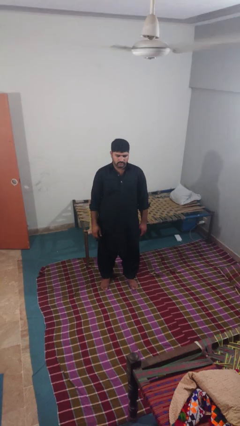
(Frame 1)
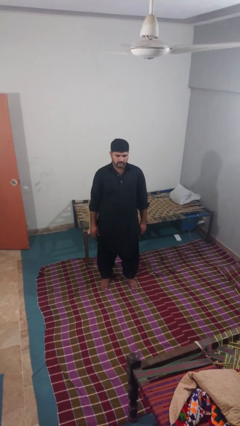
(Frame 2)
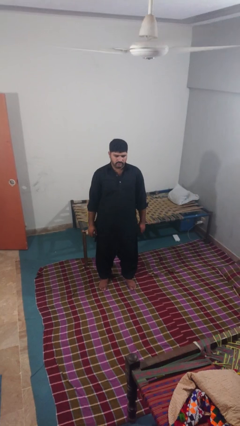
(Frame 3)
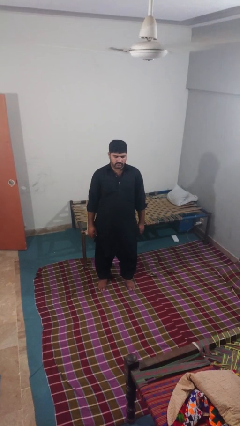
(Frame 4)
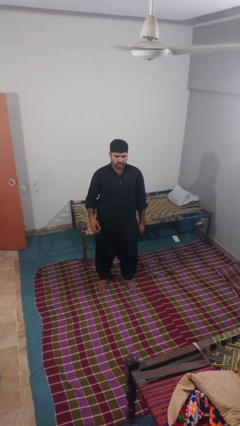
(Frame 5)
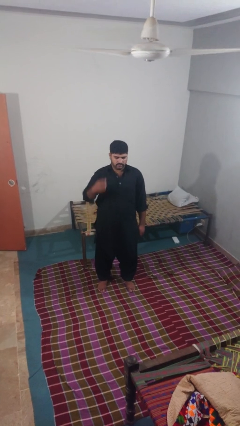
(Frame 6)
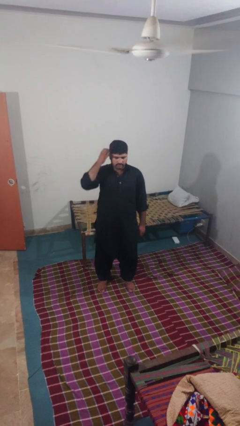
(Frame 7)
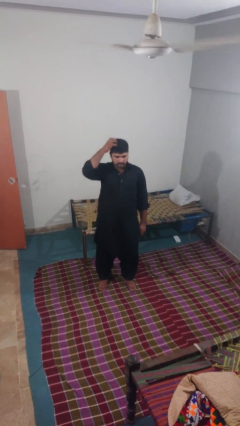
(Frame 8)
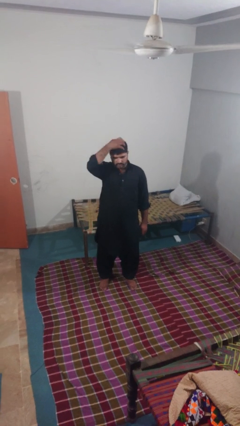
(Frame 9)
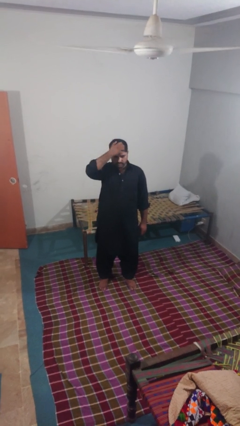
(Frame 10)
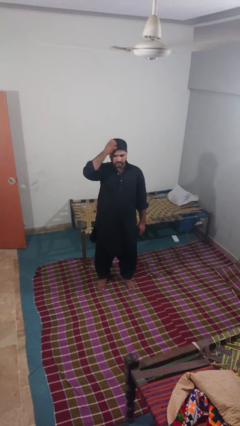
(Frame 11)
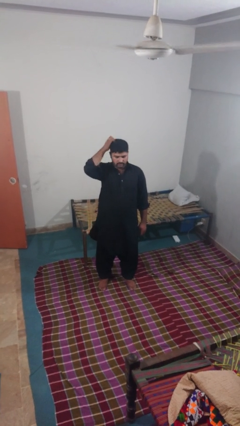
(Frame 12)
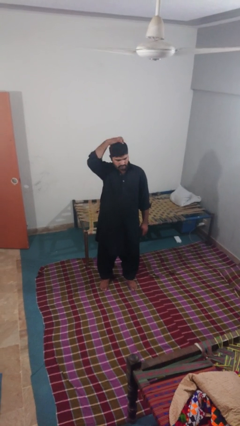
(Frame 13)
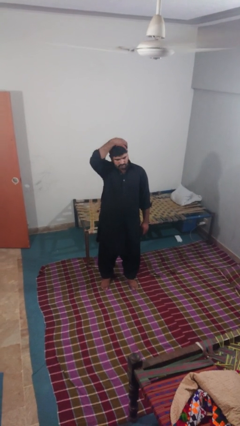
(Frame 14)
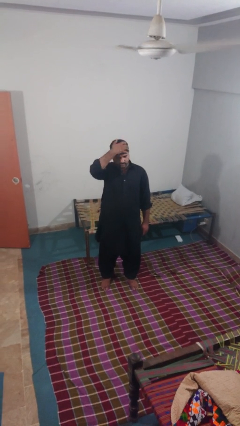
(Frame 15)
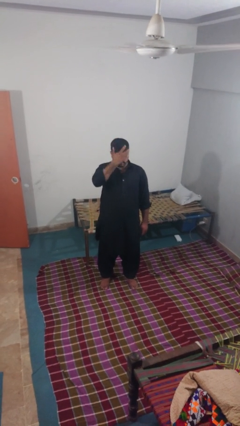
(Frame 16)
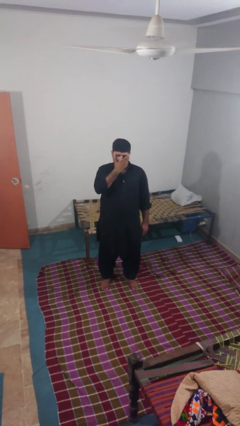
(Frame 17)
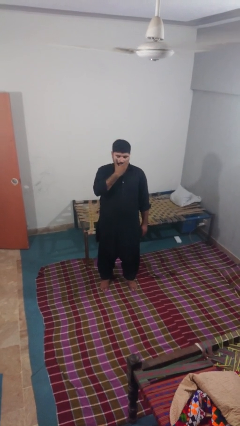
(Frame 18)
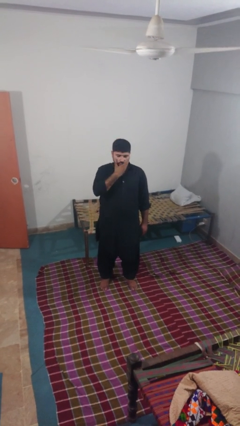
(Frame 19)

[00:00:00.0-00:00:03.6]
person scratches face

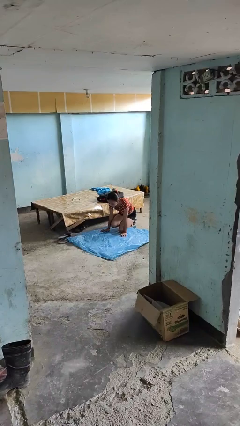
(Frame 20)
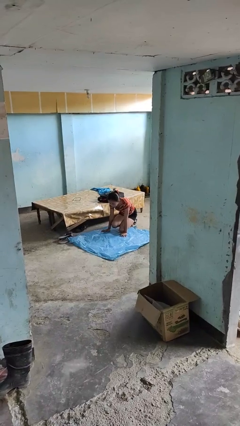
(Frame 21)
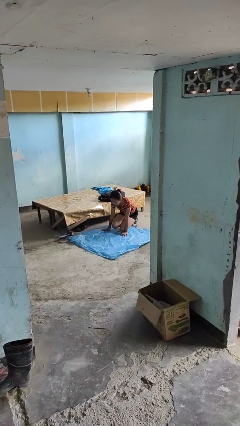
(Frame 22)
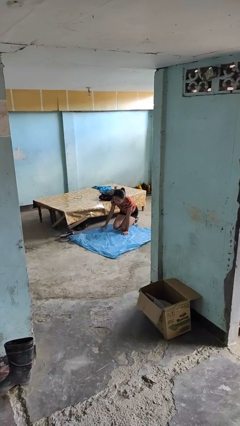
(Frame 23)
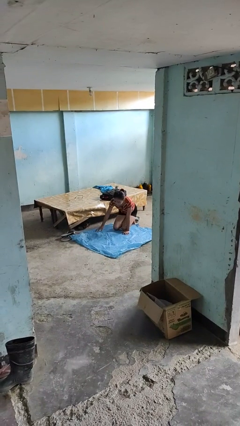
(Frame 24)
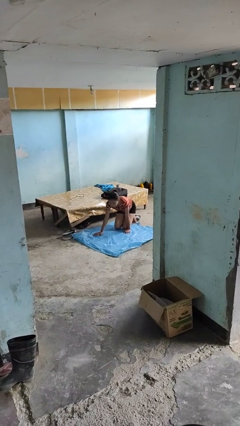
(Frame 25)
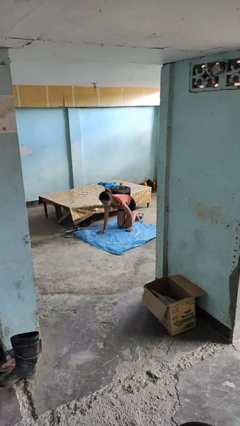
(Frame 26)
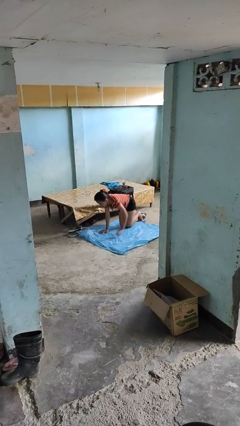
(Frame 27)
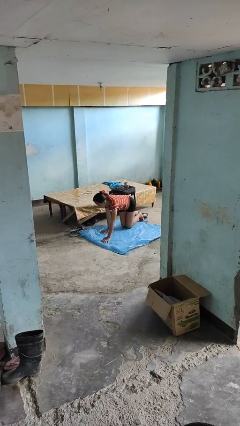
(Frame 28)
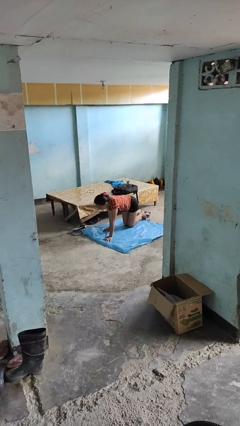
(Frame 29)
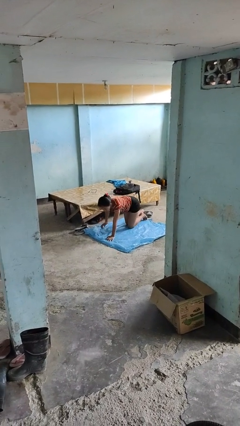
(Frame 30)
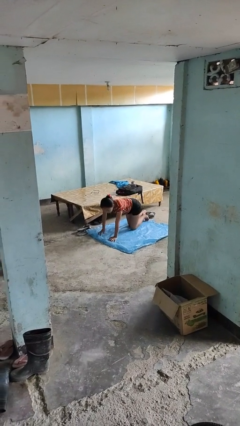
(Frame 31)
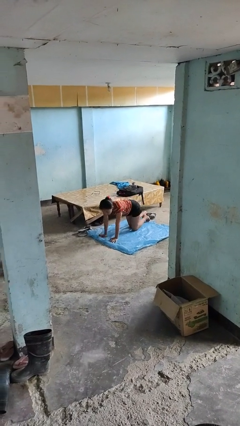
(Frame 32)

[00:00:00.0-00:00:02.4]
person crawls

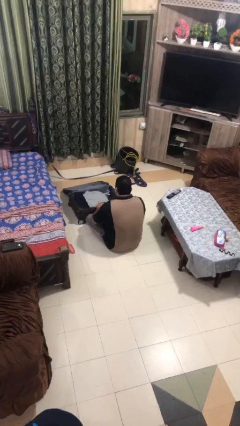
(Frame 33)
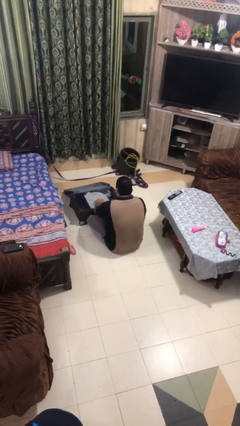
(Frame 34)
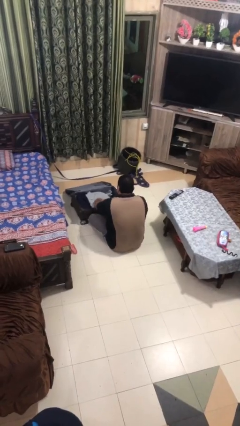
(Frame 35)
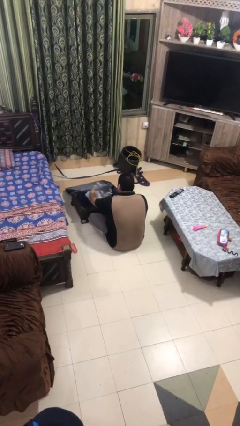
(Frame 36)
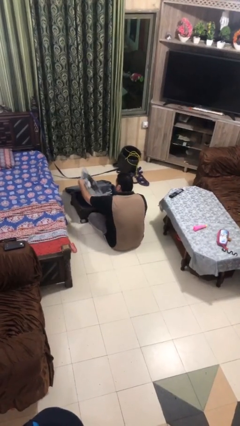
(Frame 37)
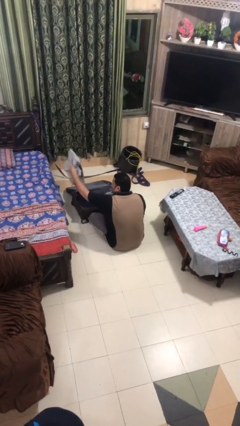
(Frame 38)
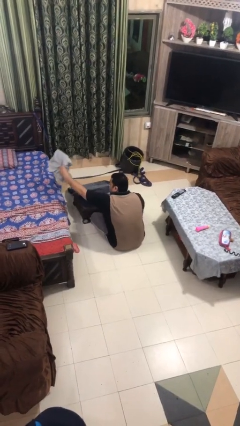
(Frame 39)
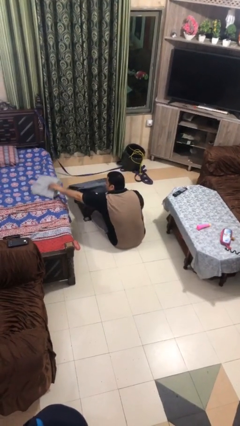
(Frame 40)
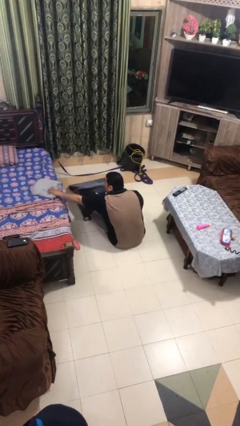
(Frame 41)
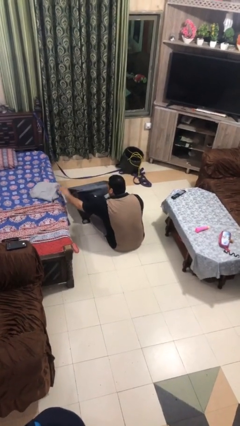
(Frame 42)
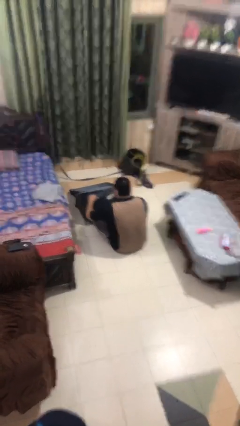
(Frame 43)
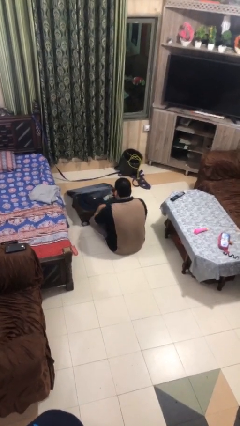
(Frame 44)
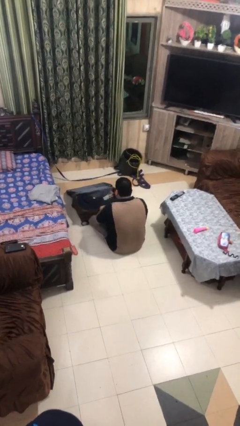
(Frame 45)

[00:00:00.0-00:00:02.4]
person unloads clothes from suitcase

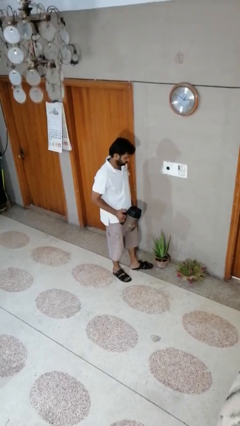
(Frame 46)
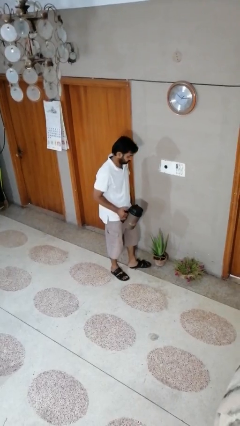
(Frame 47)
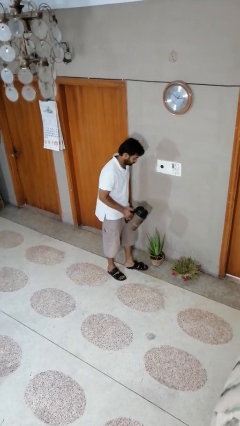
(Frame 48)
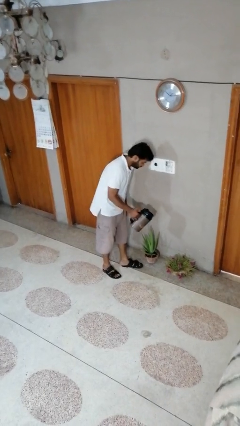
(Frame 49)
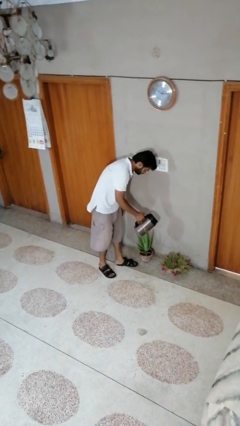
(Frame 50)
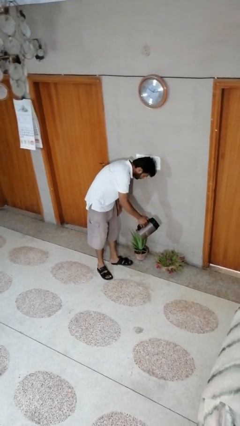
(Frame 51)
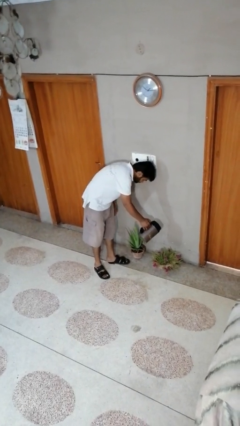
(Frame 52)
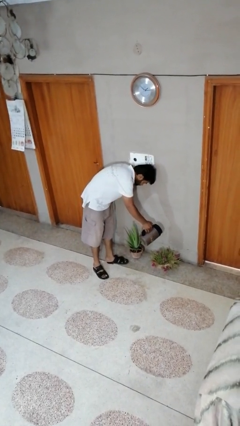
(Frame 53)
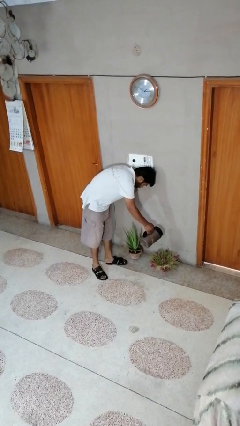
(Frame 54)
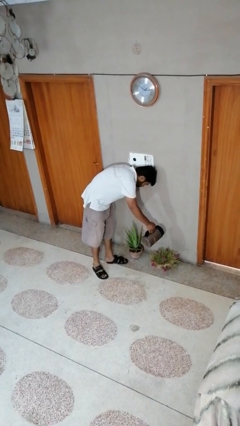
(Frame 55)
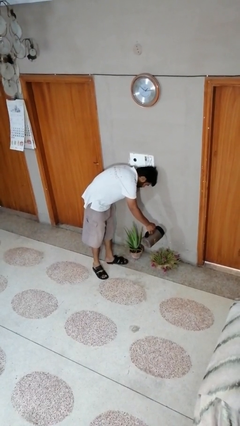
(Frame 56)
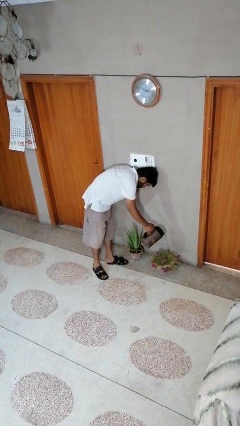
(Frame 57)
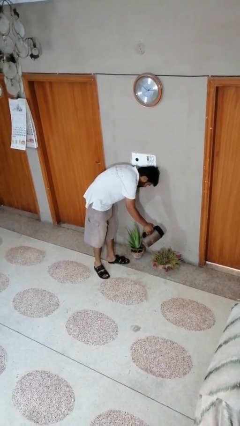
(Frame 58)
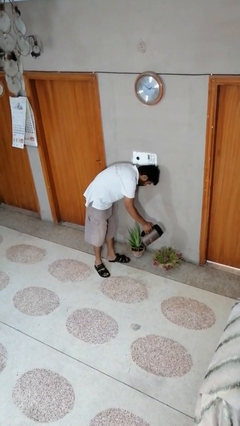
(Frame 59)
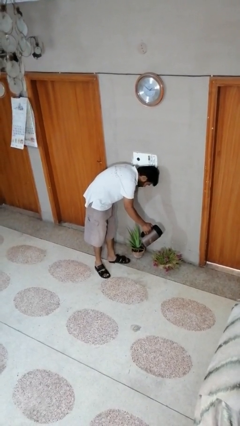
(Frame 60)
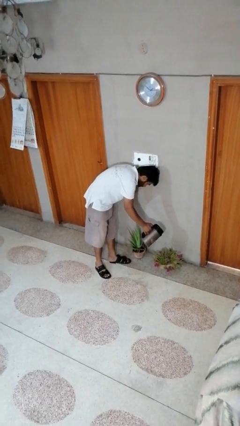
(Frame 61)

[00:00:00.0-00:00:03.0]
person waters houseplant

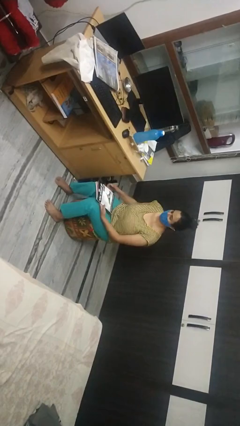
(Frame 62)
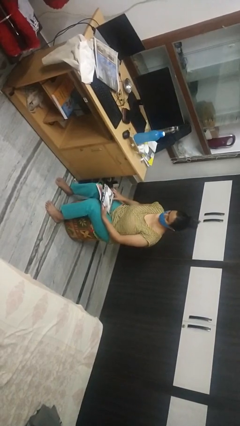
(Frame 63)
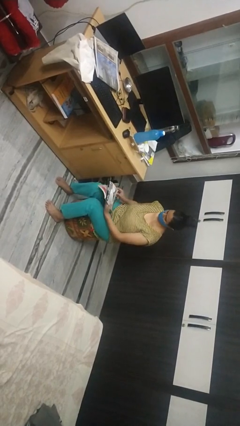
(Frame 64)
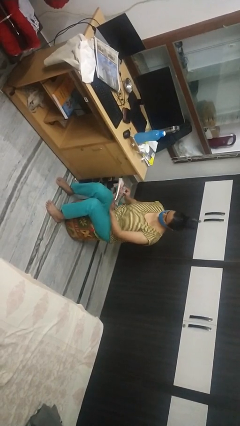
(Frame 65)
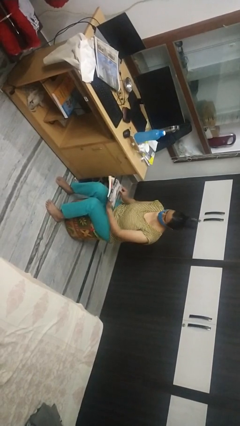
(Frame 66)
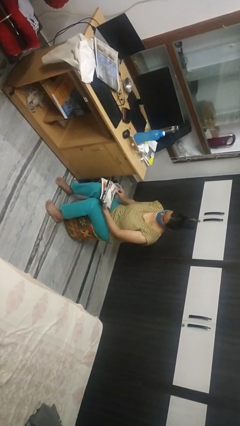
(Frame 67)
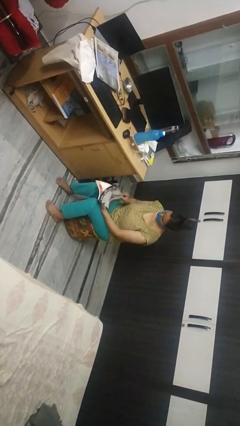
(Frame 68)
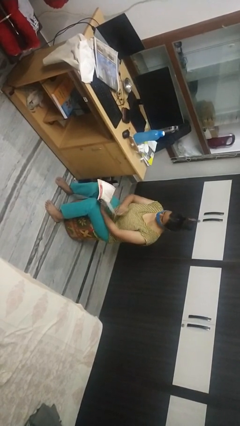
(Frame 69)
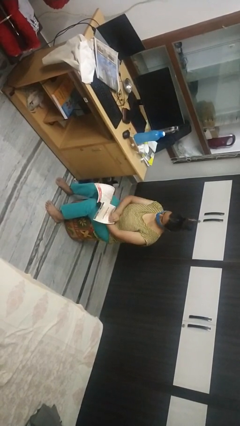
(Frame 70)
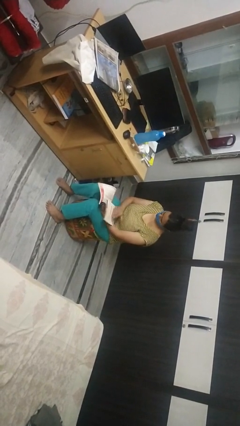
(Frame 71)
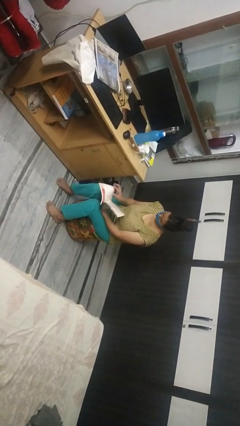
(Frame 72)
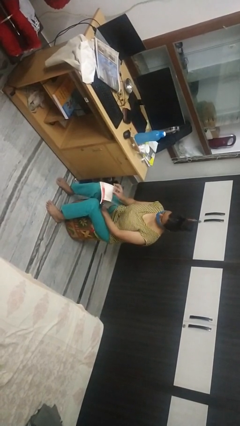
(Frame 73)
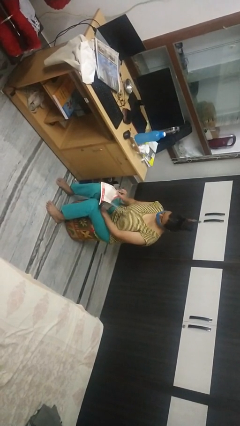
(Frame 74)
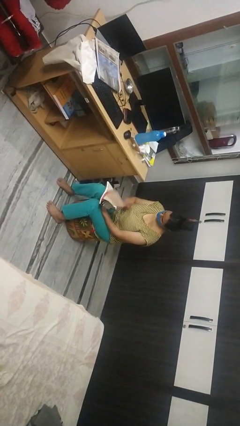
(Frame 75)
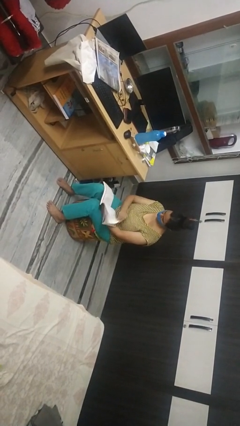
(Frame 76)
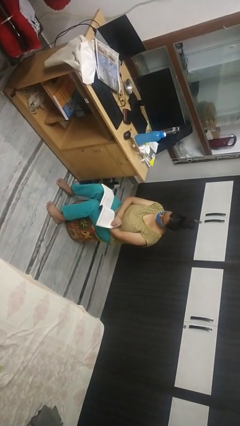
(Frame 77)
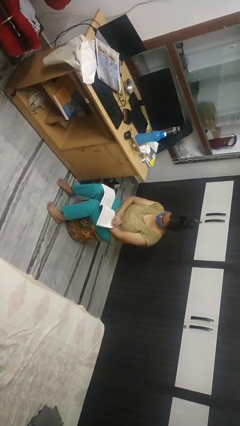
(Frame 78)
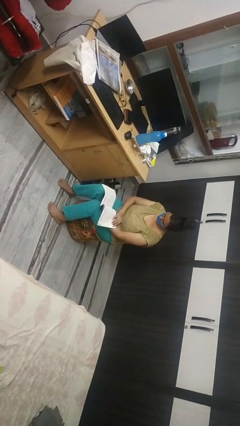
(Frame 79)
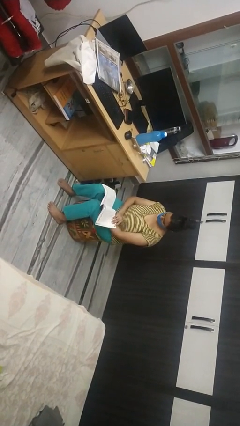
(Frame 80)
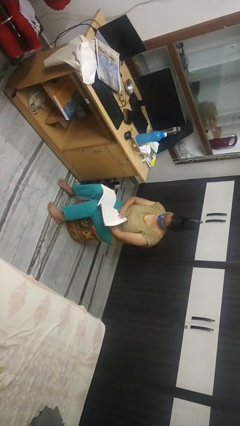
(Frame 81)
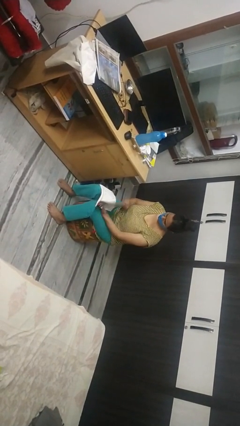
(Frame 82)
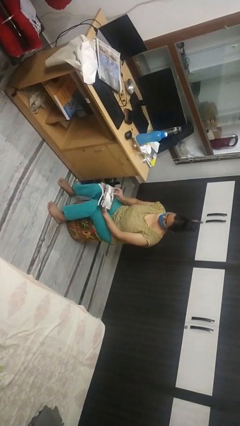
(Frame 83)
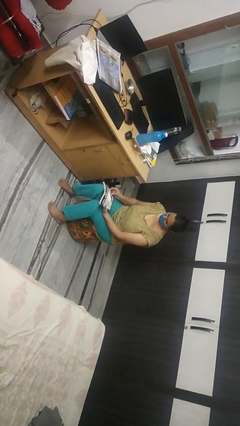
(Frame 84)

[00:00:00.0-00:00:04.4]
person reads magazine

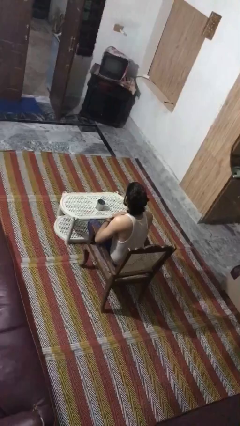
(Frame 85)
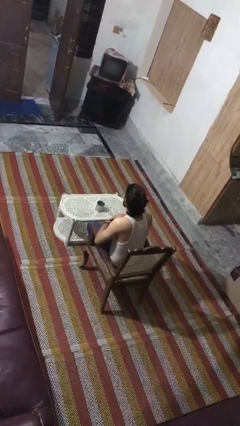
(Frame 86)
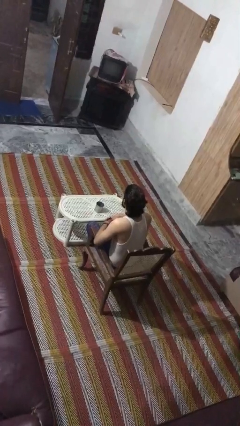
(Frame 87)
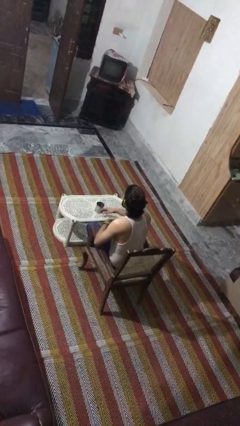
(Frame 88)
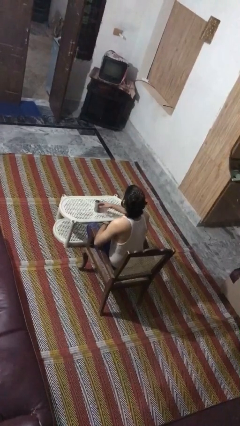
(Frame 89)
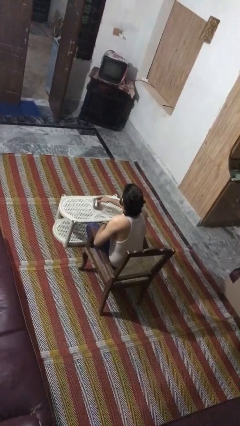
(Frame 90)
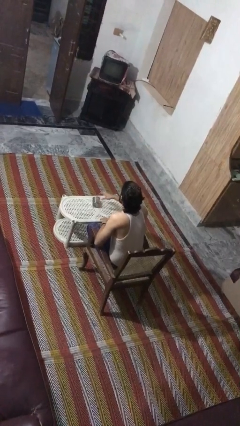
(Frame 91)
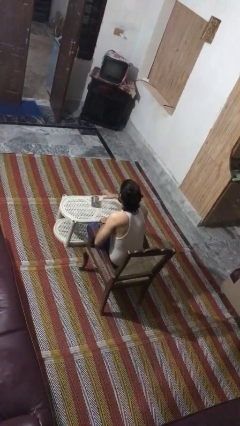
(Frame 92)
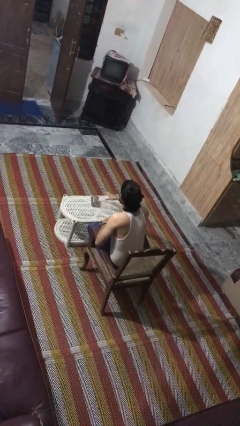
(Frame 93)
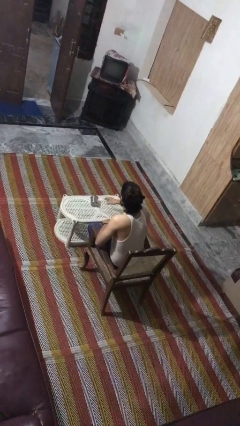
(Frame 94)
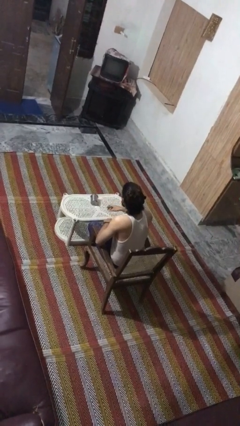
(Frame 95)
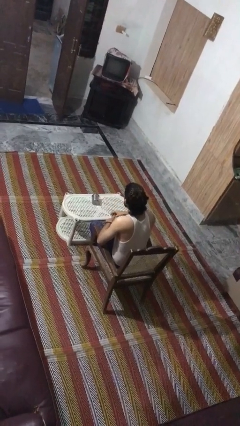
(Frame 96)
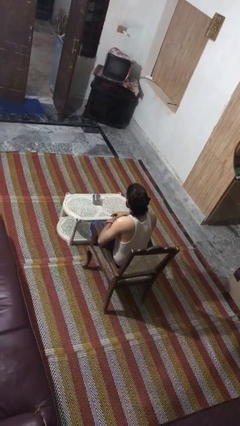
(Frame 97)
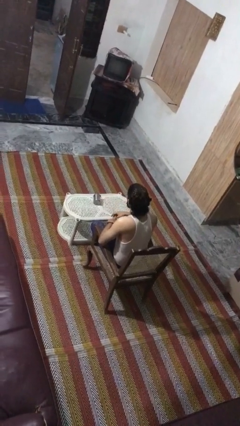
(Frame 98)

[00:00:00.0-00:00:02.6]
person knocks over glass
